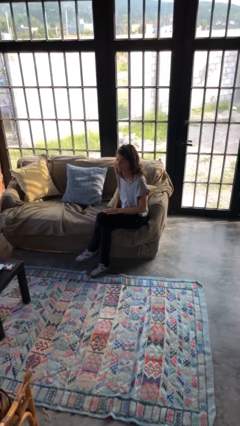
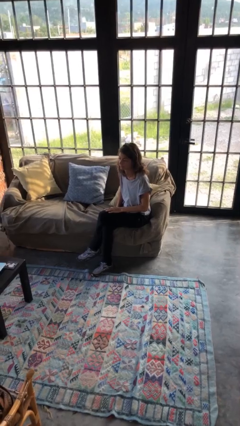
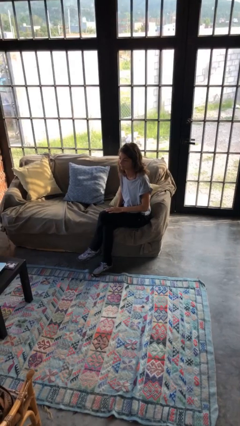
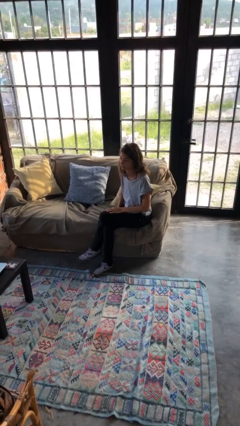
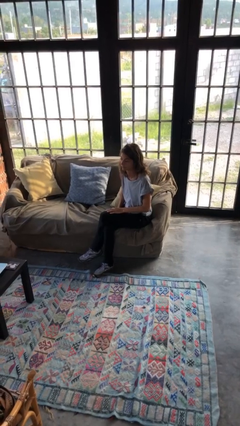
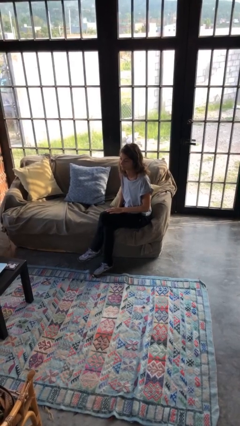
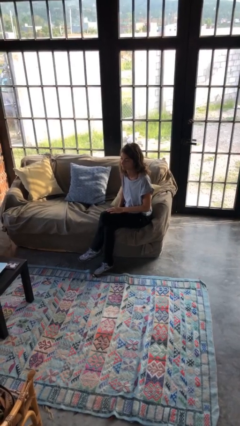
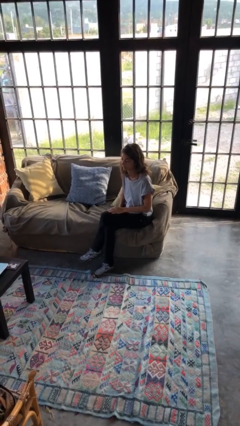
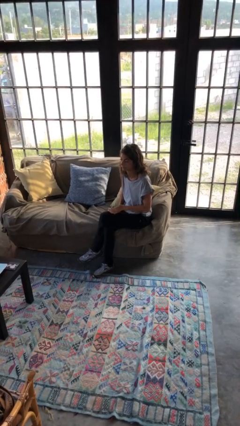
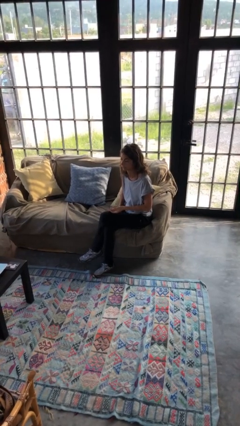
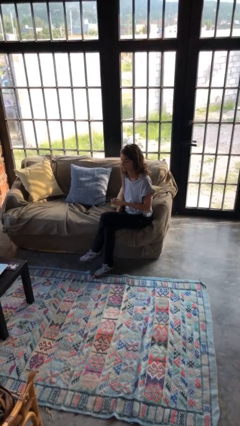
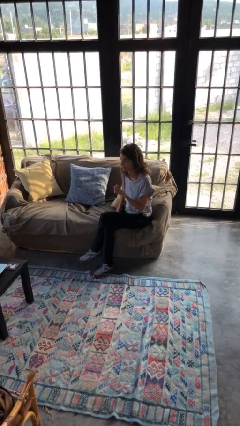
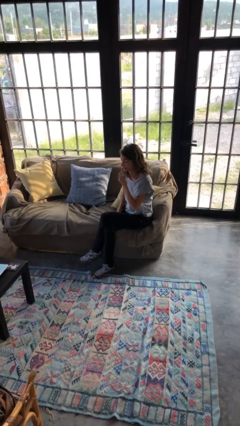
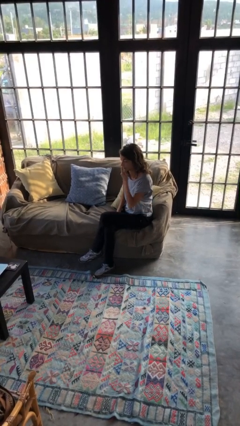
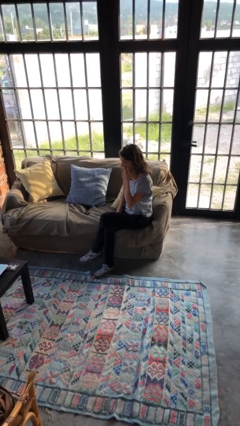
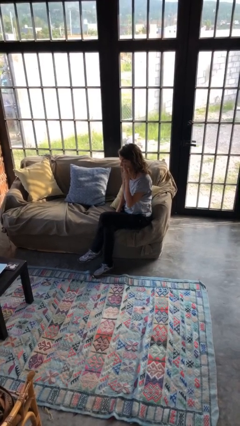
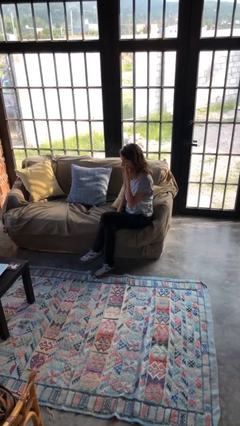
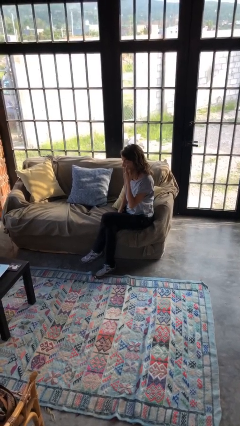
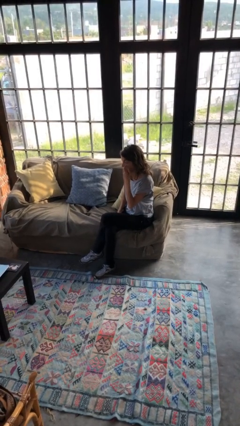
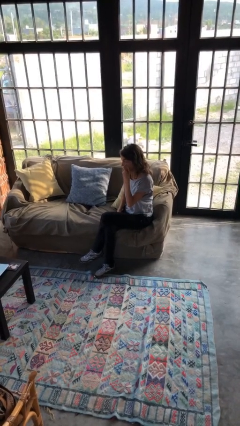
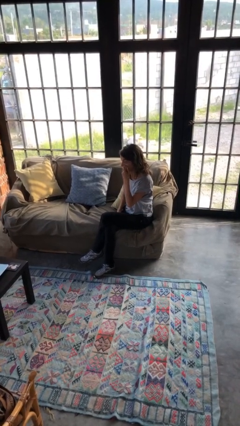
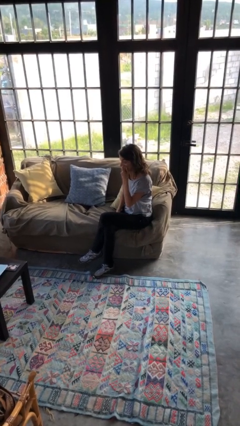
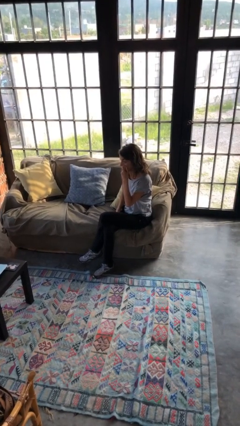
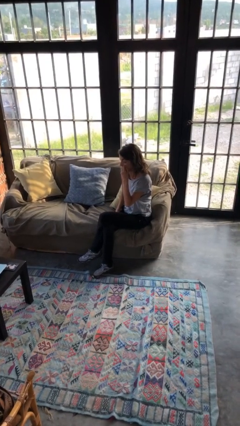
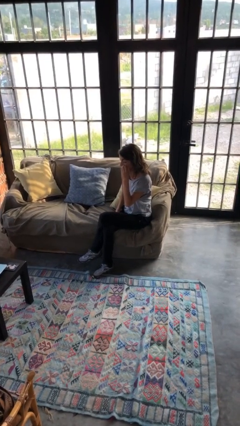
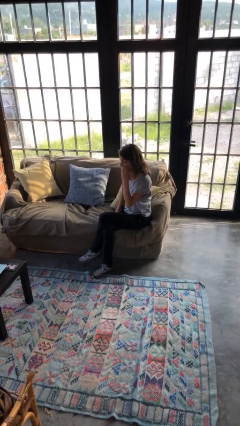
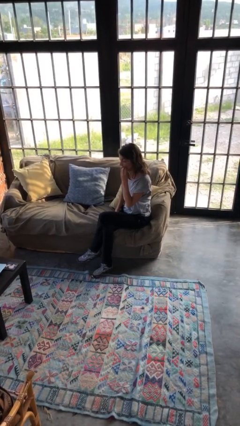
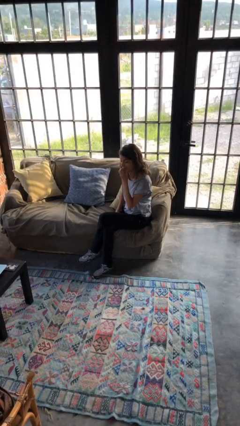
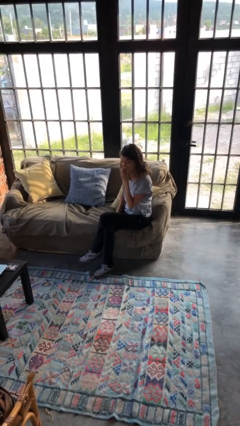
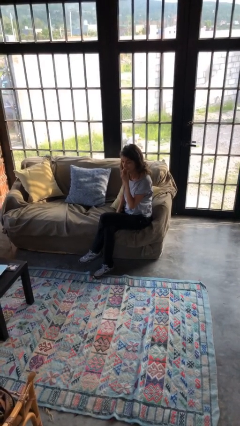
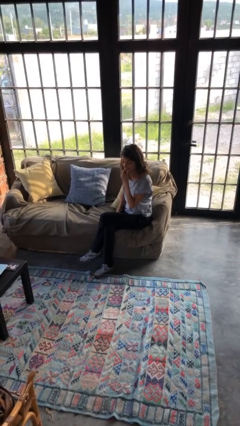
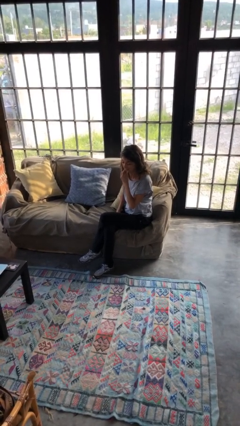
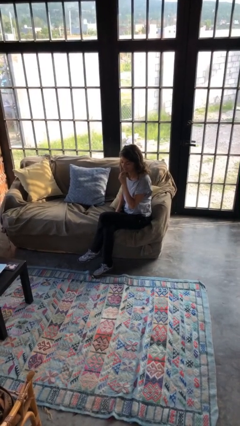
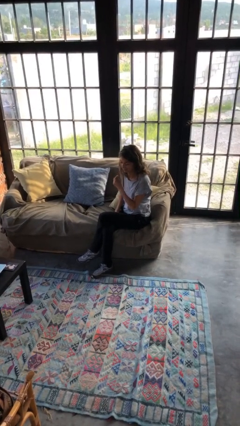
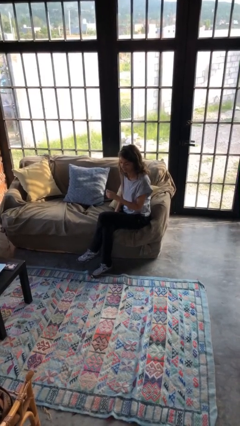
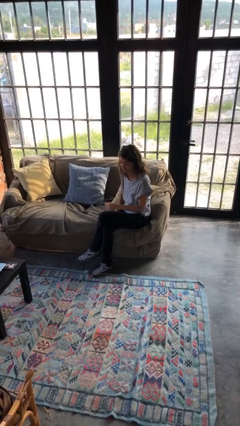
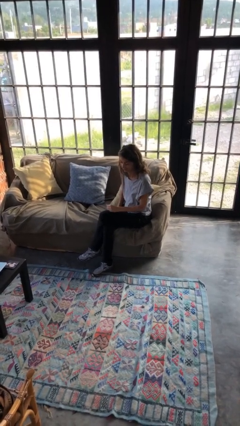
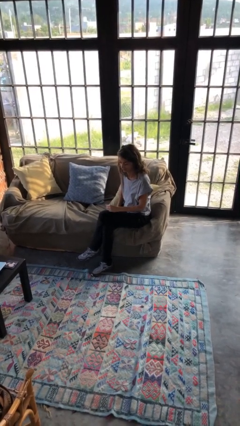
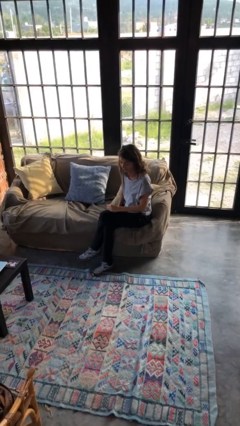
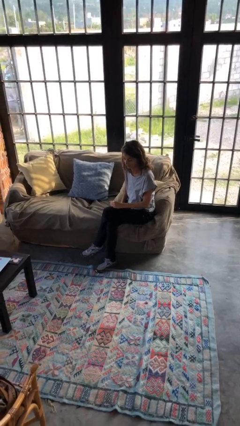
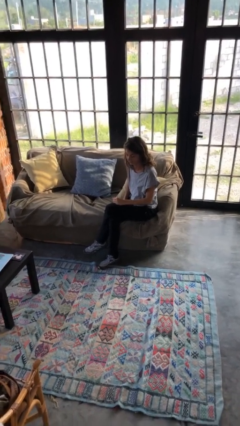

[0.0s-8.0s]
person scratches face

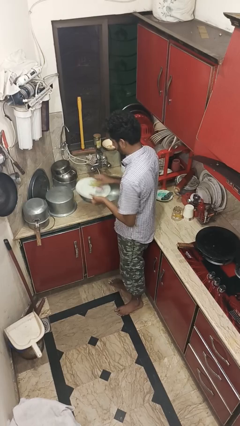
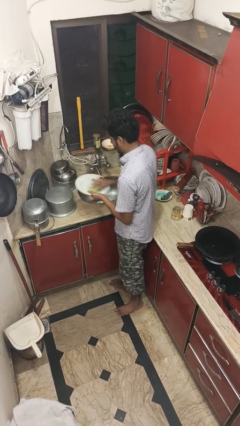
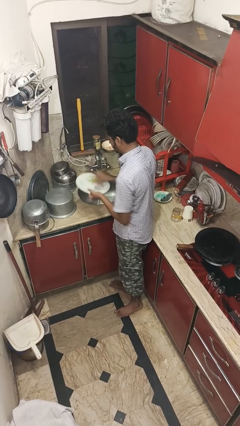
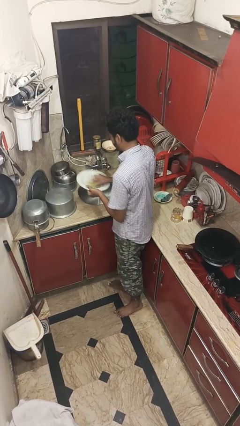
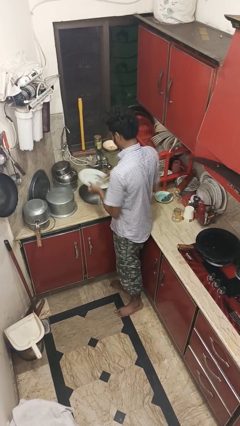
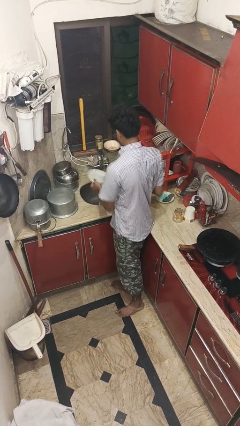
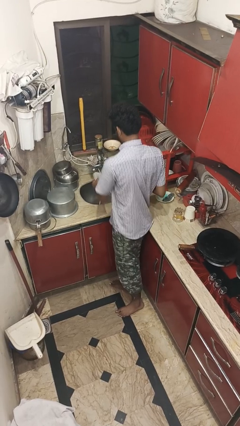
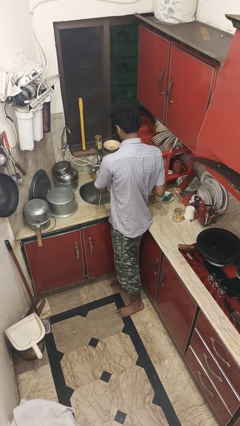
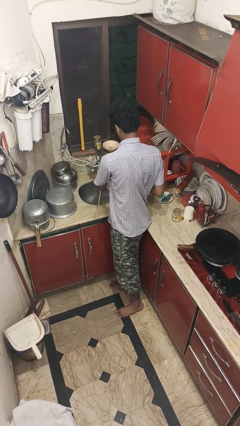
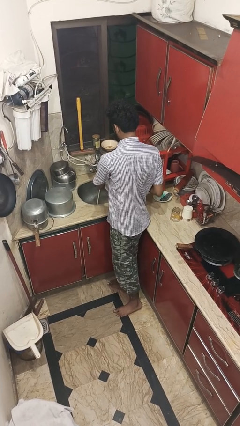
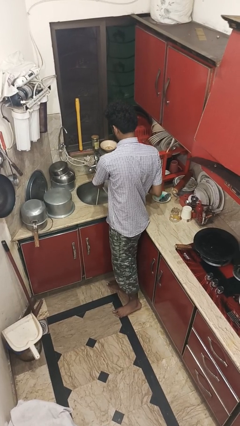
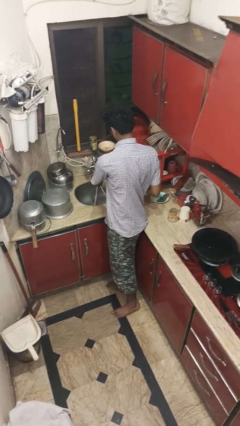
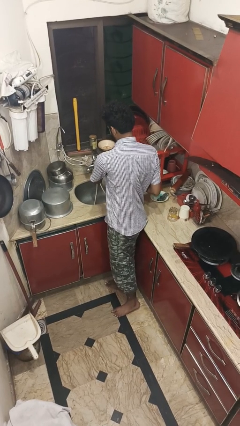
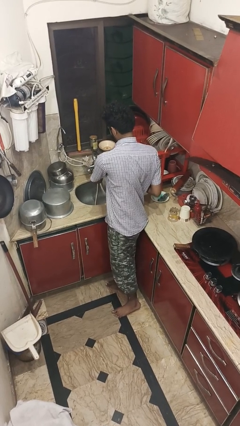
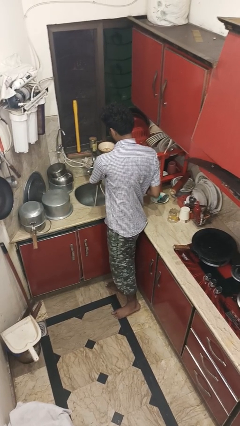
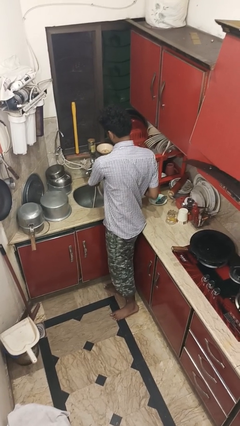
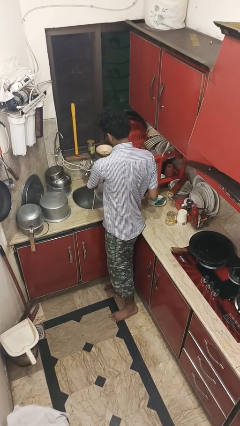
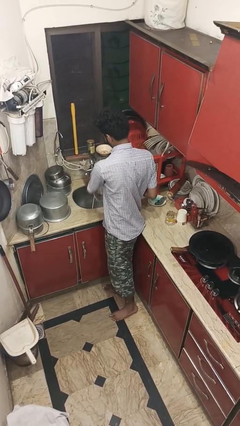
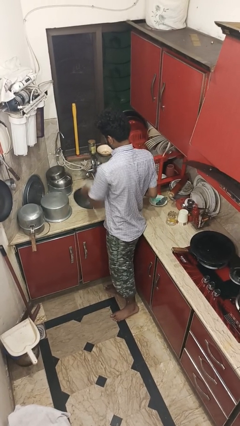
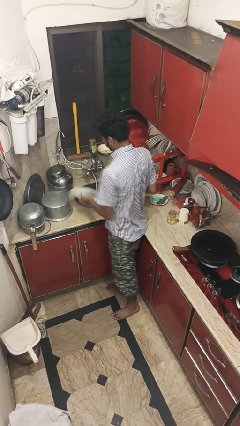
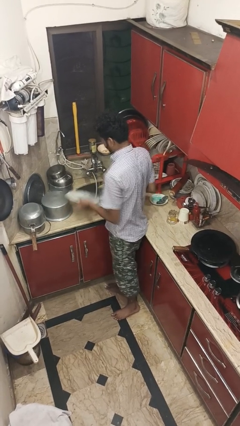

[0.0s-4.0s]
person washes dish

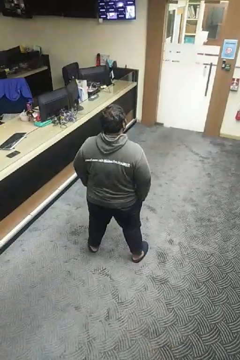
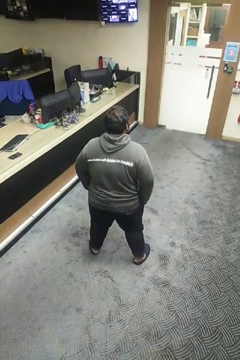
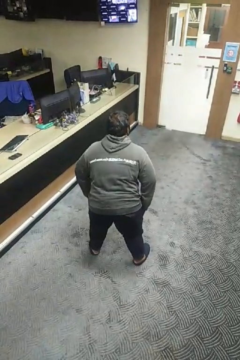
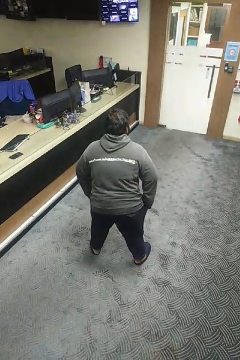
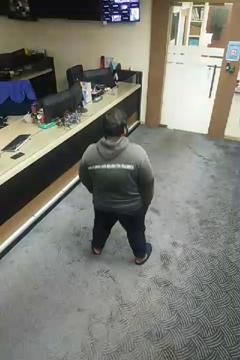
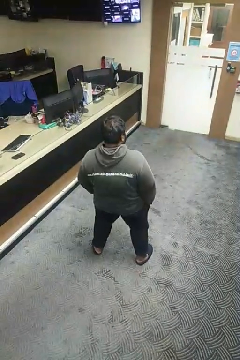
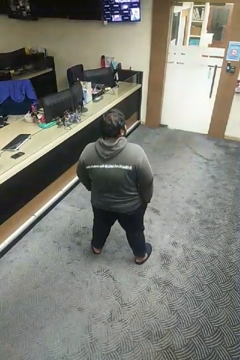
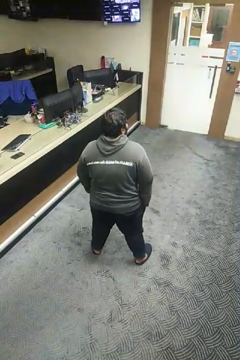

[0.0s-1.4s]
person wiggles hips

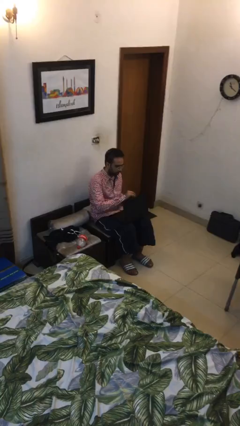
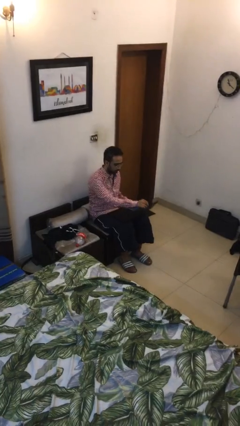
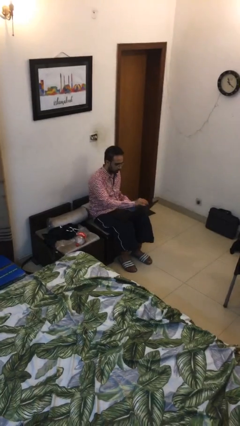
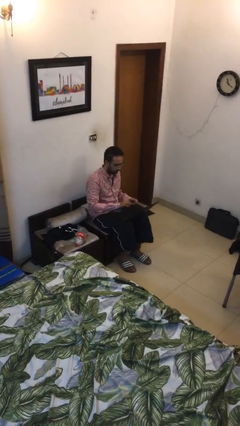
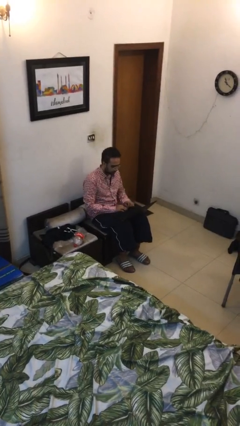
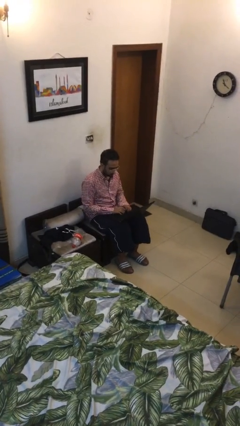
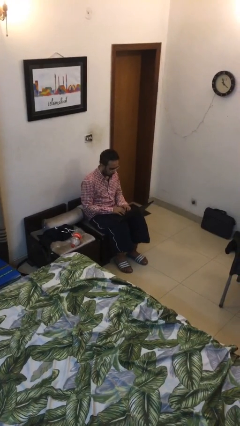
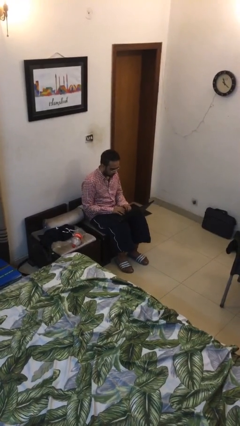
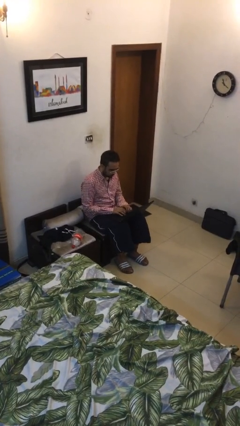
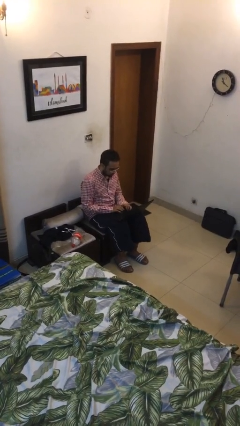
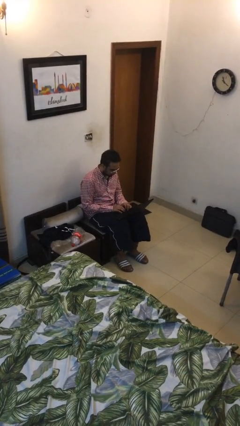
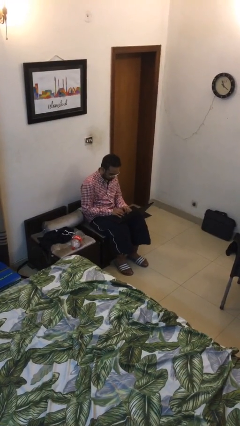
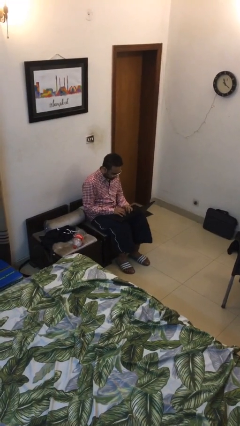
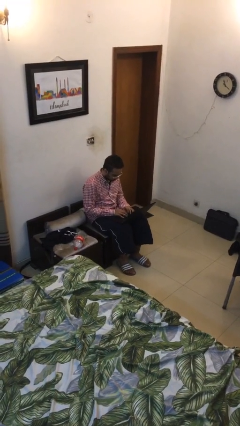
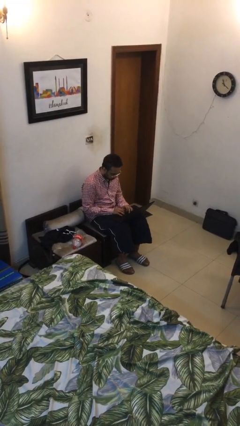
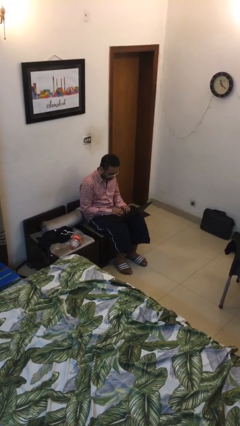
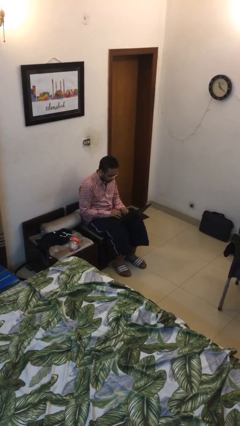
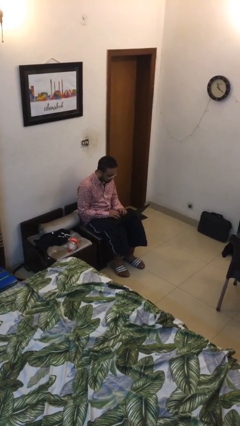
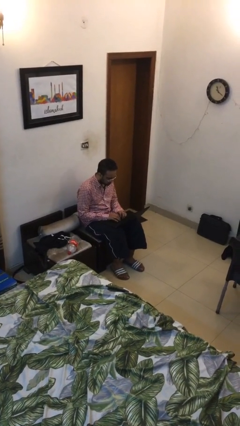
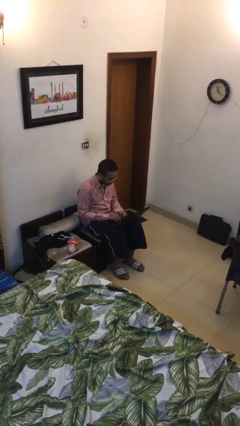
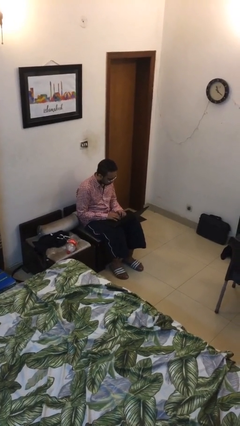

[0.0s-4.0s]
person interacts with laptop

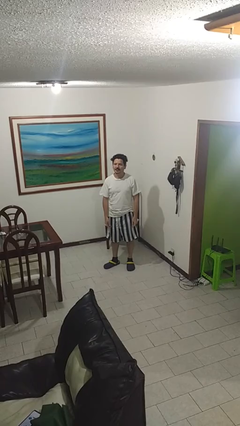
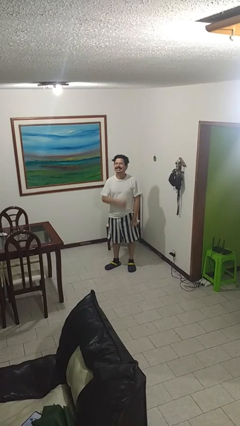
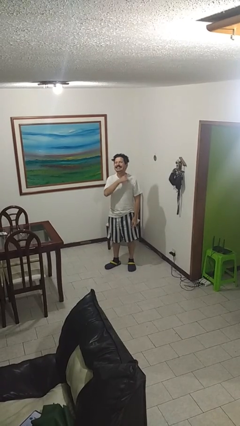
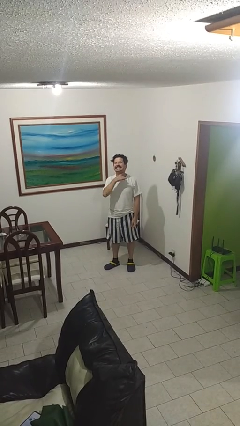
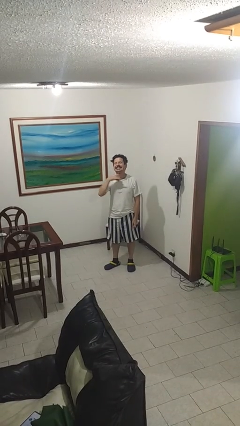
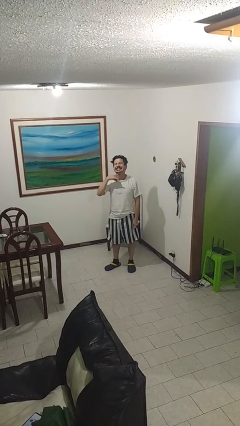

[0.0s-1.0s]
person gestures cut
